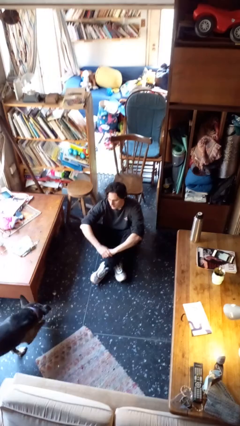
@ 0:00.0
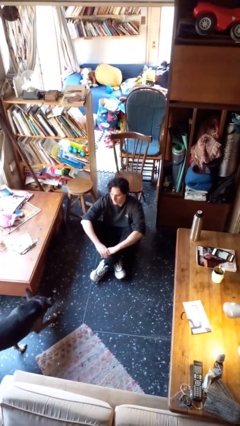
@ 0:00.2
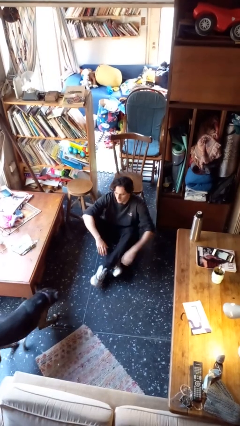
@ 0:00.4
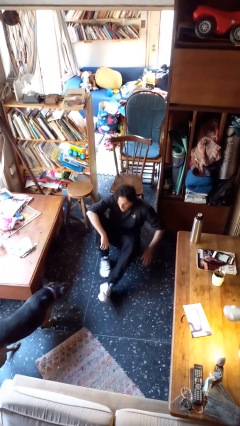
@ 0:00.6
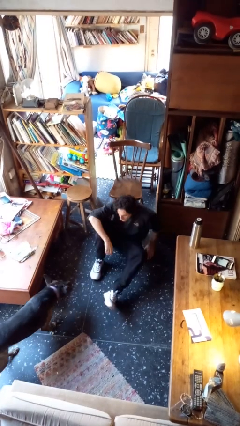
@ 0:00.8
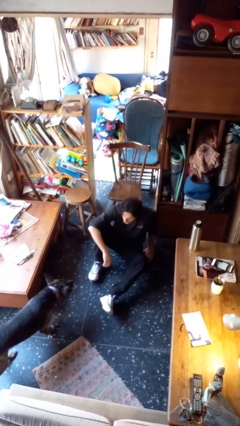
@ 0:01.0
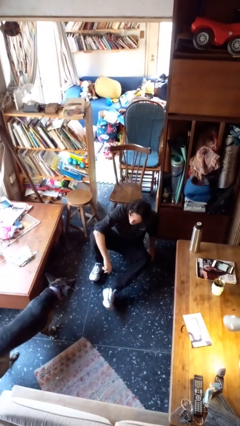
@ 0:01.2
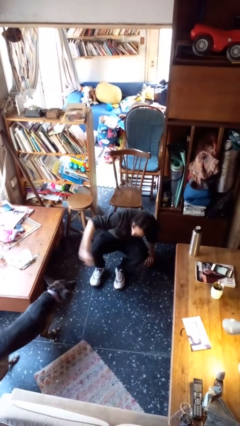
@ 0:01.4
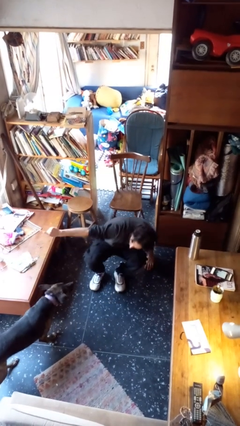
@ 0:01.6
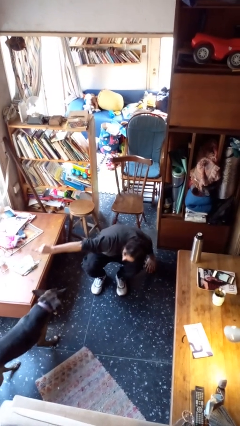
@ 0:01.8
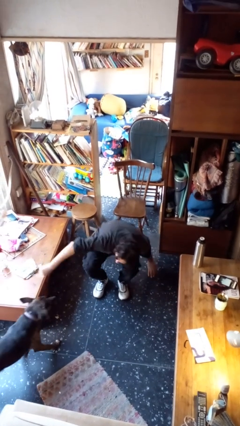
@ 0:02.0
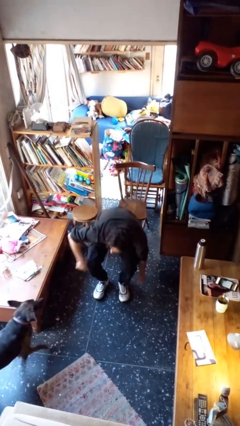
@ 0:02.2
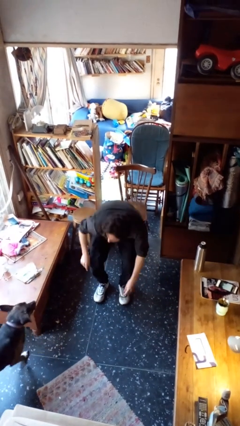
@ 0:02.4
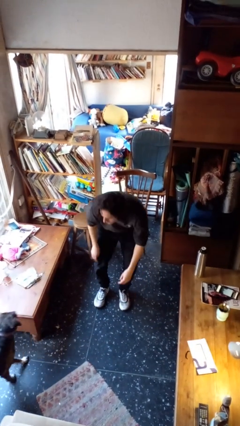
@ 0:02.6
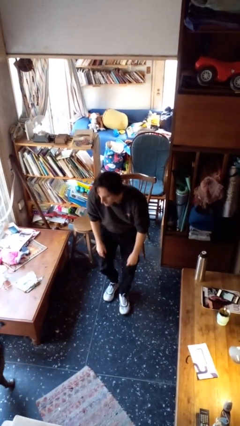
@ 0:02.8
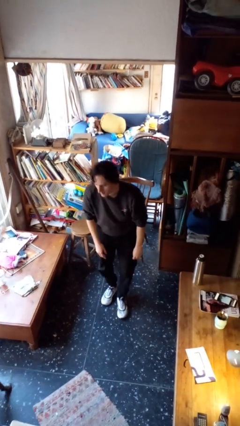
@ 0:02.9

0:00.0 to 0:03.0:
person stands up from floor

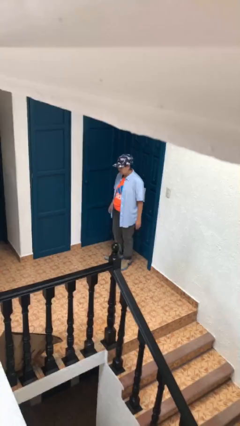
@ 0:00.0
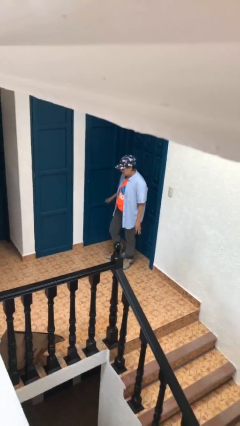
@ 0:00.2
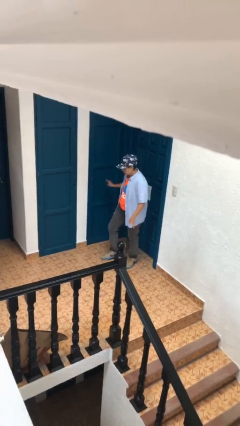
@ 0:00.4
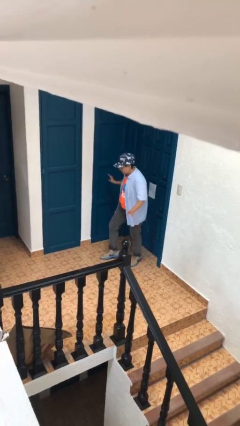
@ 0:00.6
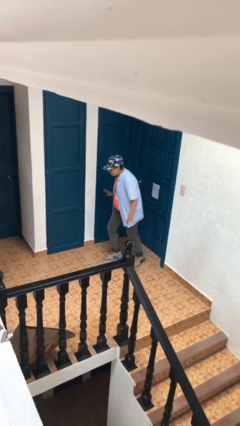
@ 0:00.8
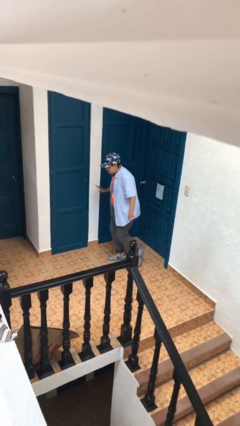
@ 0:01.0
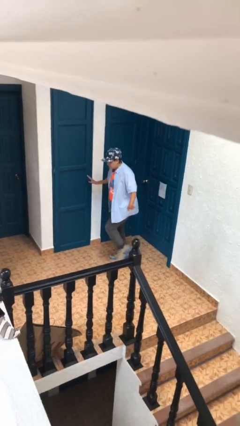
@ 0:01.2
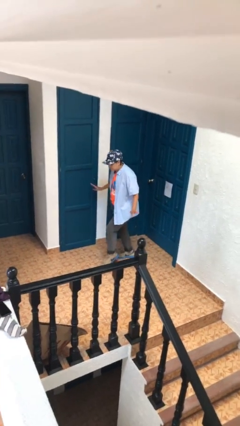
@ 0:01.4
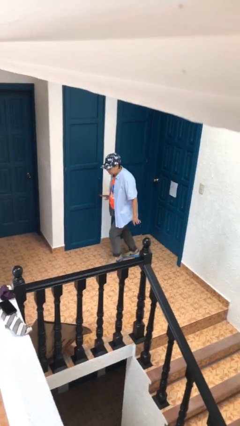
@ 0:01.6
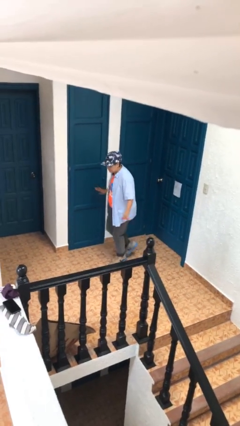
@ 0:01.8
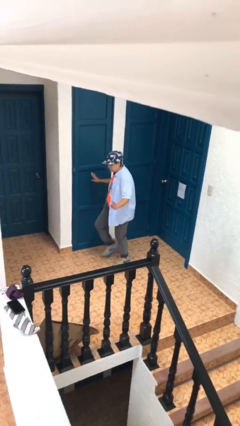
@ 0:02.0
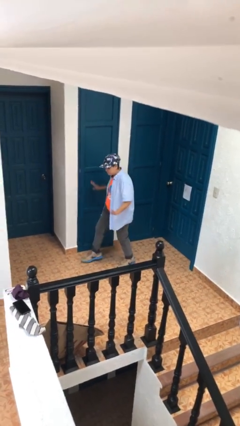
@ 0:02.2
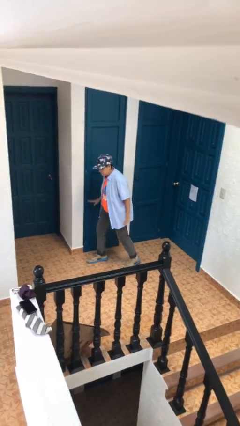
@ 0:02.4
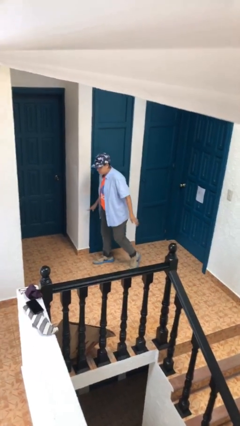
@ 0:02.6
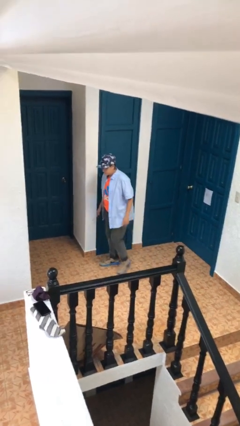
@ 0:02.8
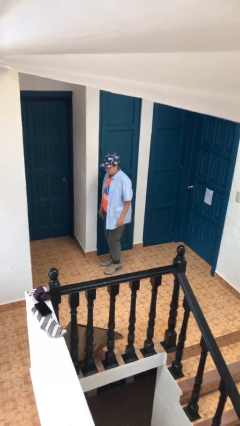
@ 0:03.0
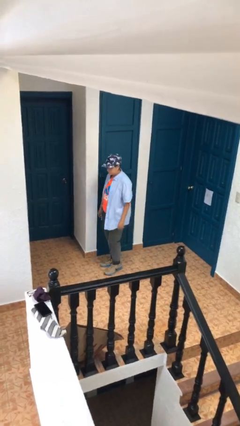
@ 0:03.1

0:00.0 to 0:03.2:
person walks tiptoe

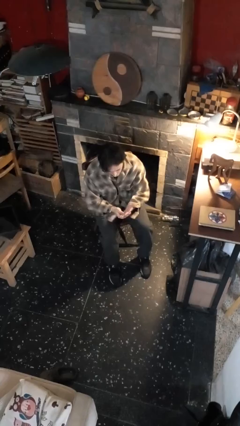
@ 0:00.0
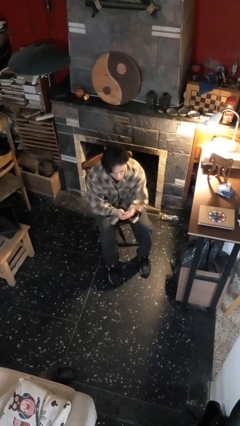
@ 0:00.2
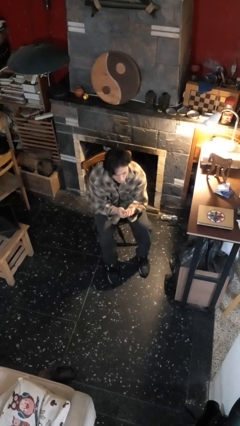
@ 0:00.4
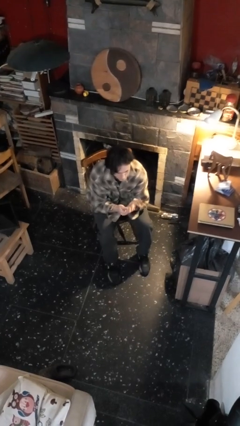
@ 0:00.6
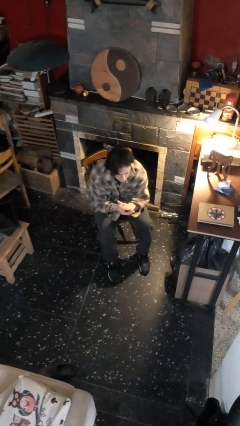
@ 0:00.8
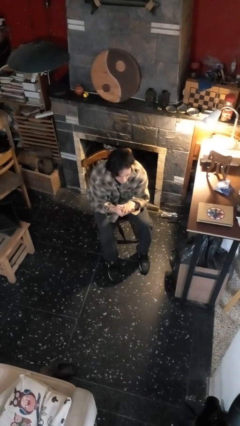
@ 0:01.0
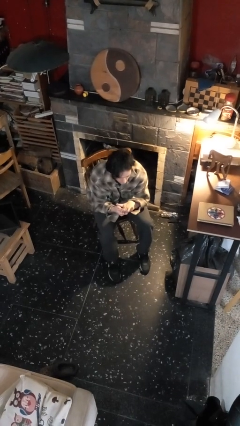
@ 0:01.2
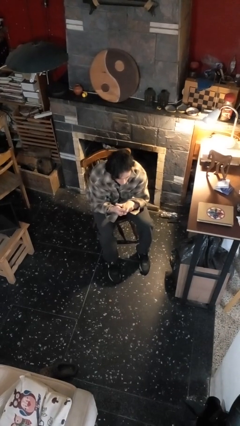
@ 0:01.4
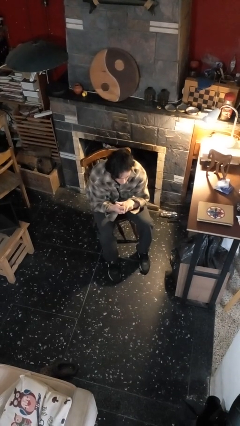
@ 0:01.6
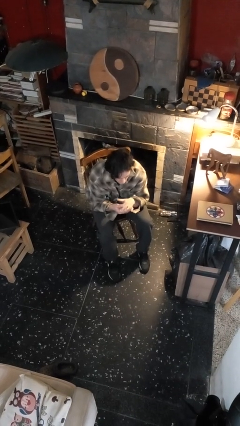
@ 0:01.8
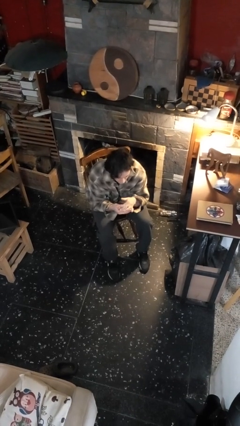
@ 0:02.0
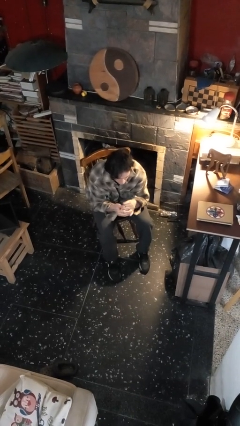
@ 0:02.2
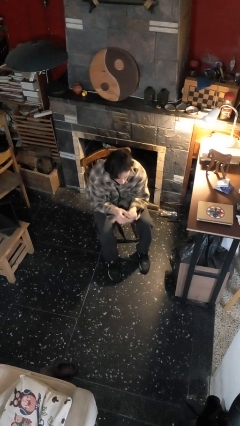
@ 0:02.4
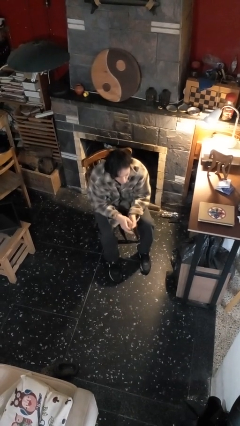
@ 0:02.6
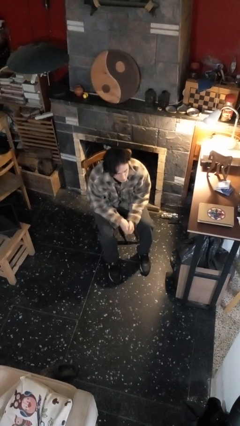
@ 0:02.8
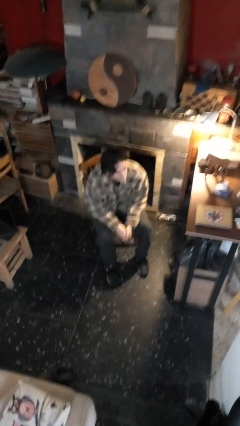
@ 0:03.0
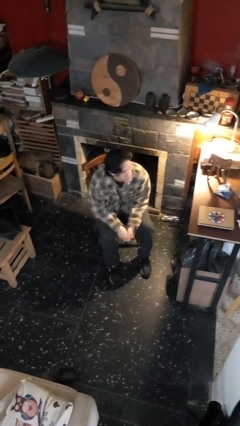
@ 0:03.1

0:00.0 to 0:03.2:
person looks at hands in lap

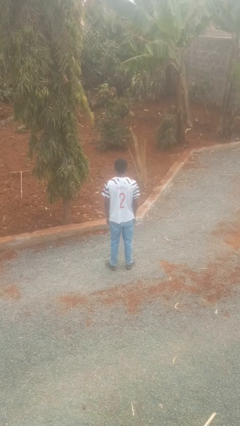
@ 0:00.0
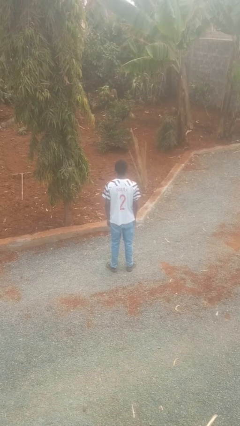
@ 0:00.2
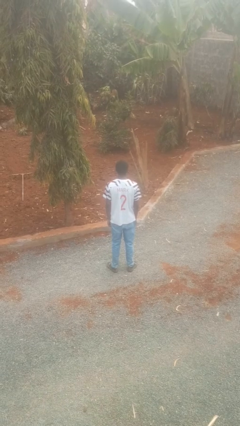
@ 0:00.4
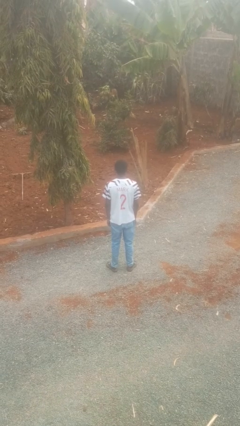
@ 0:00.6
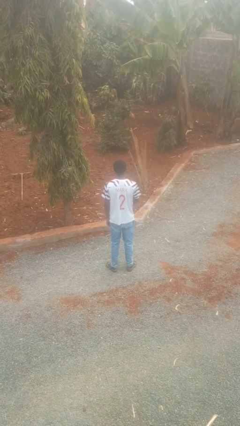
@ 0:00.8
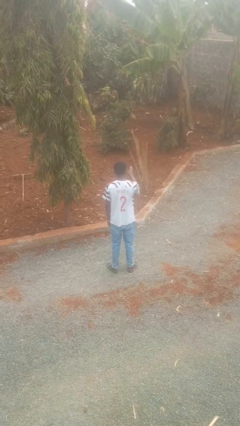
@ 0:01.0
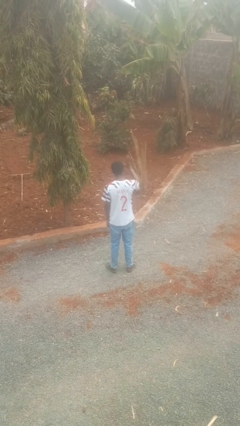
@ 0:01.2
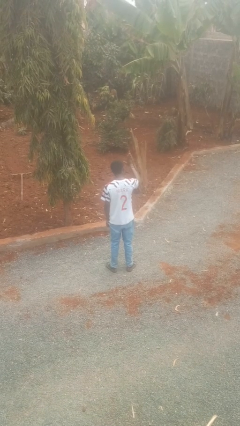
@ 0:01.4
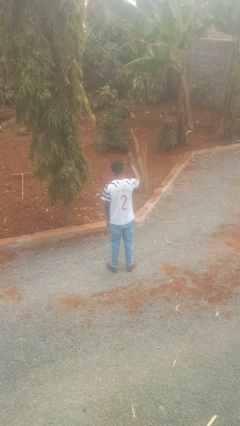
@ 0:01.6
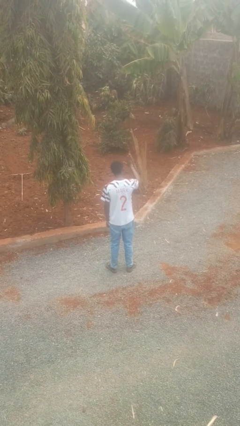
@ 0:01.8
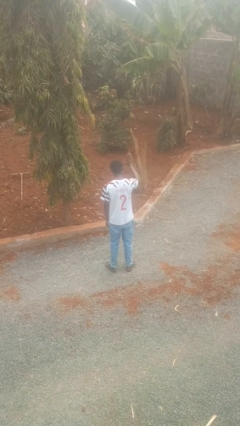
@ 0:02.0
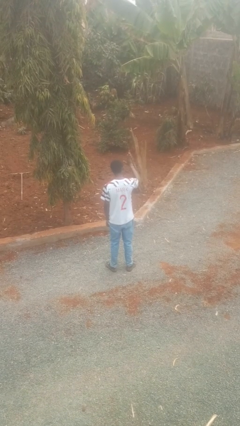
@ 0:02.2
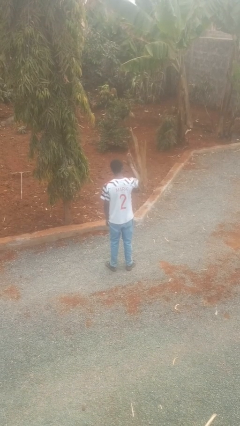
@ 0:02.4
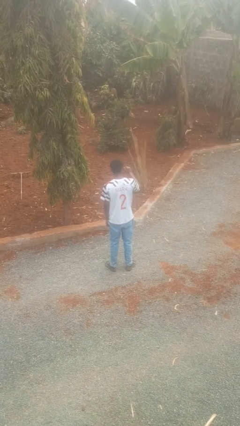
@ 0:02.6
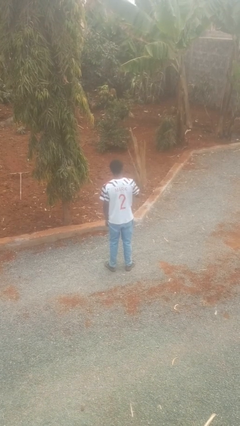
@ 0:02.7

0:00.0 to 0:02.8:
person gestures stop

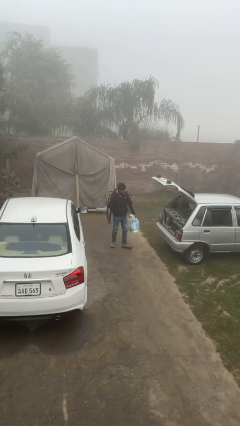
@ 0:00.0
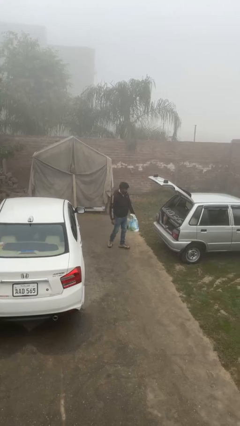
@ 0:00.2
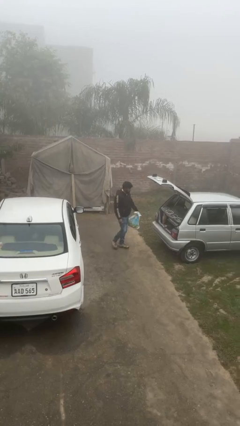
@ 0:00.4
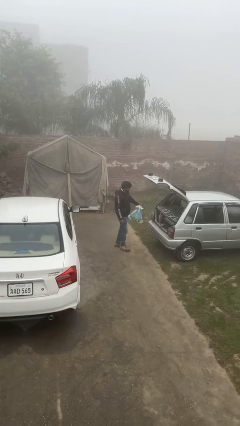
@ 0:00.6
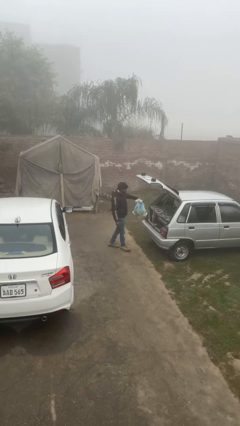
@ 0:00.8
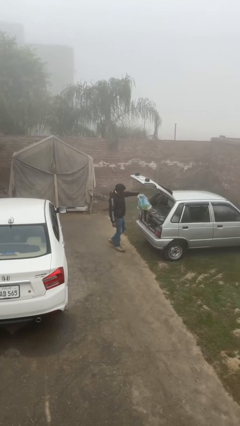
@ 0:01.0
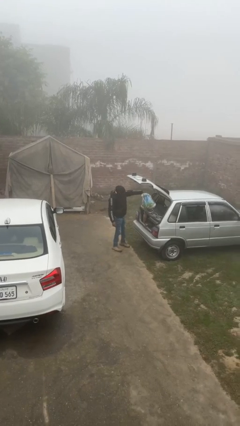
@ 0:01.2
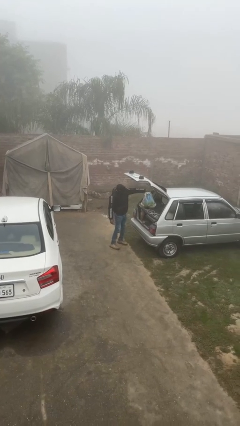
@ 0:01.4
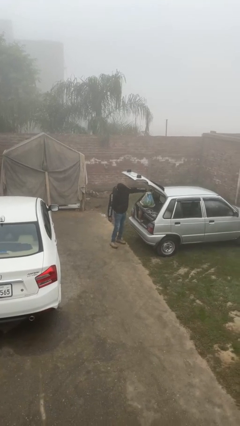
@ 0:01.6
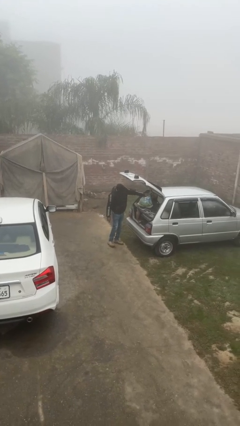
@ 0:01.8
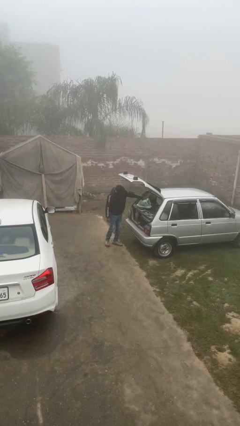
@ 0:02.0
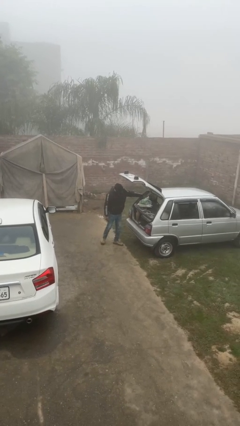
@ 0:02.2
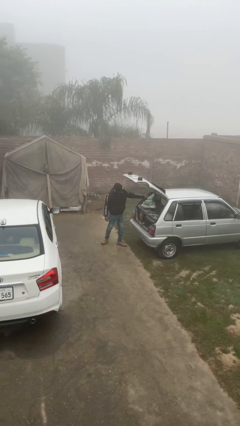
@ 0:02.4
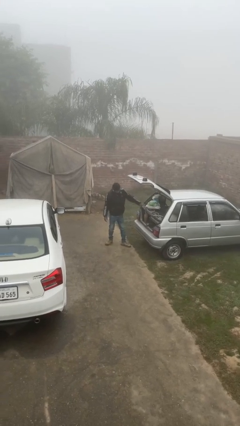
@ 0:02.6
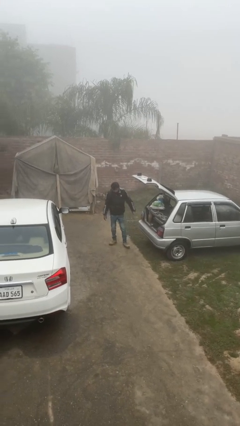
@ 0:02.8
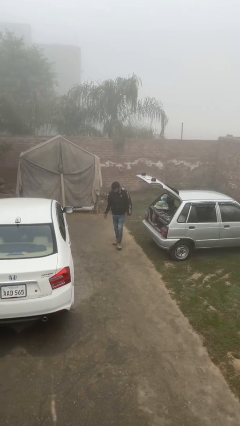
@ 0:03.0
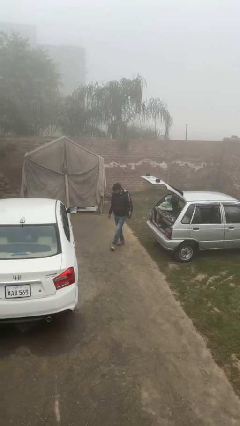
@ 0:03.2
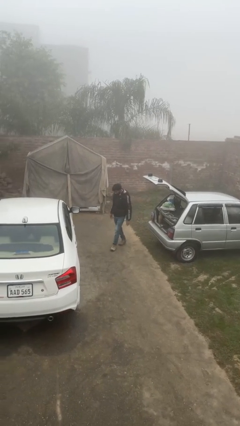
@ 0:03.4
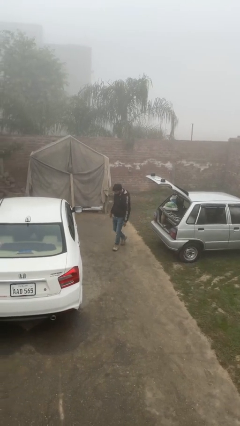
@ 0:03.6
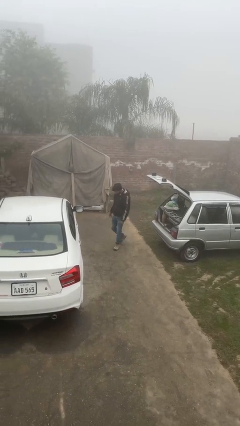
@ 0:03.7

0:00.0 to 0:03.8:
person loads car

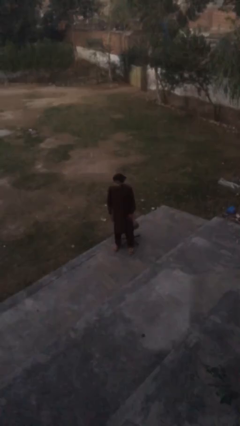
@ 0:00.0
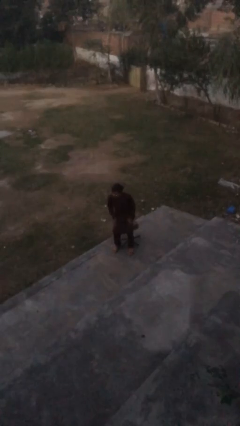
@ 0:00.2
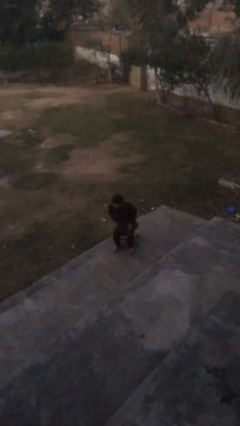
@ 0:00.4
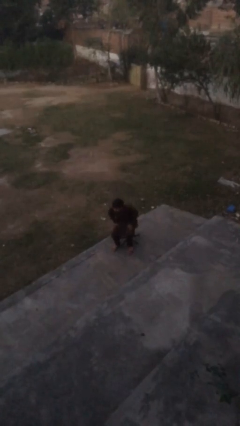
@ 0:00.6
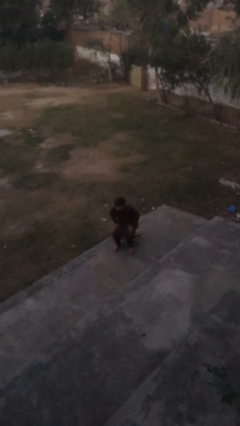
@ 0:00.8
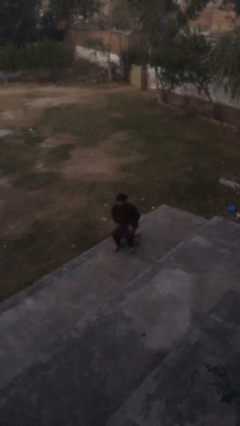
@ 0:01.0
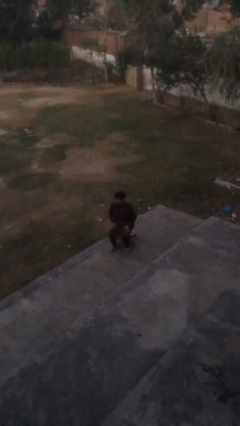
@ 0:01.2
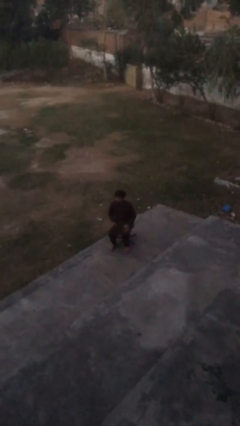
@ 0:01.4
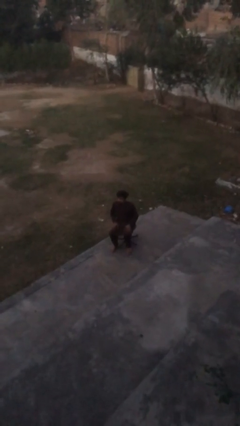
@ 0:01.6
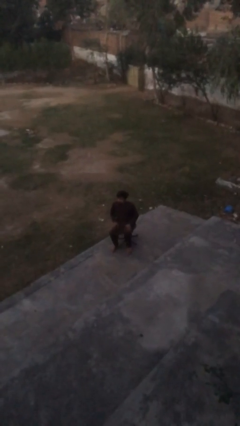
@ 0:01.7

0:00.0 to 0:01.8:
person sits down
